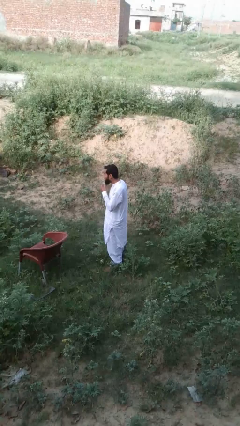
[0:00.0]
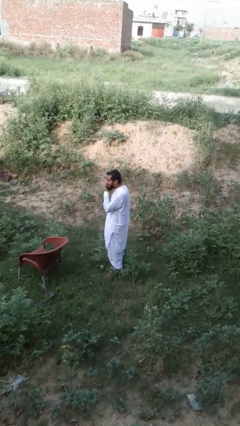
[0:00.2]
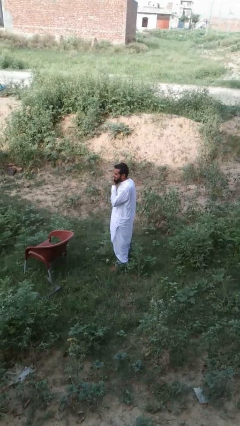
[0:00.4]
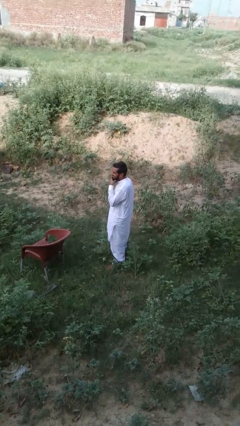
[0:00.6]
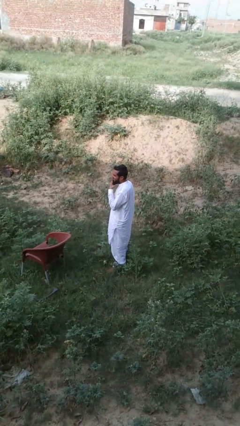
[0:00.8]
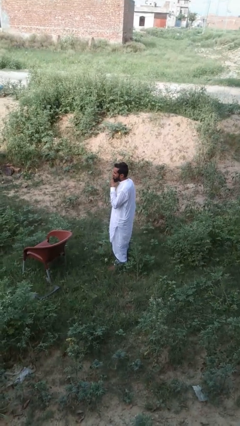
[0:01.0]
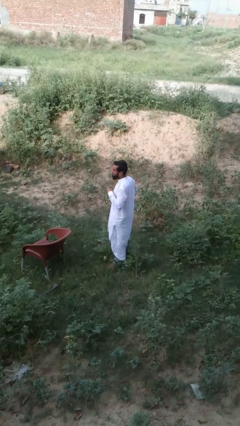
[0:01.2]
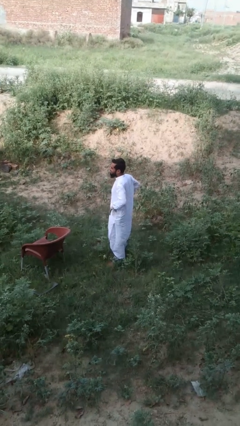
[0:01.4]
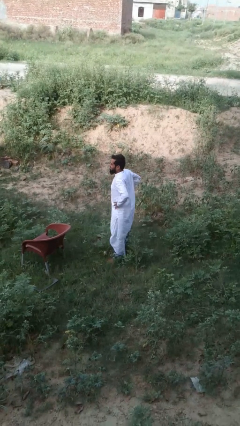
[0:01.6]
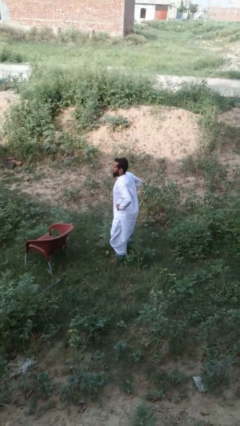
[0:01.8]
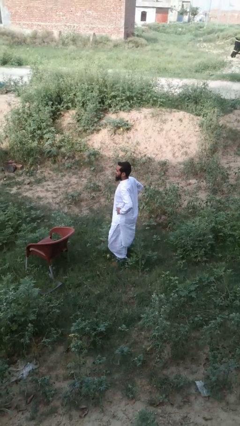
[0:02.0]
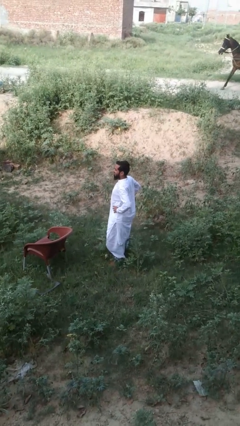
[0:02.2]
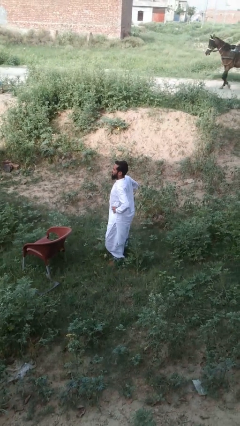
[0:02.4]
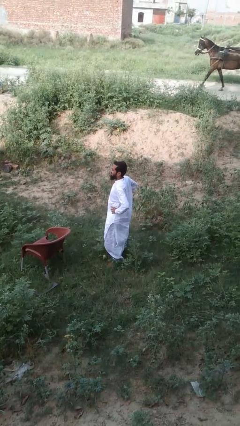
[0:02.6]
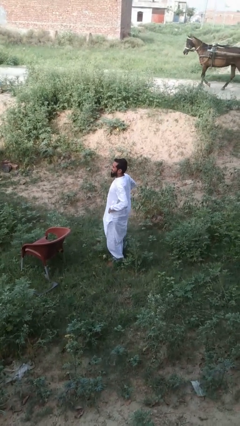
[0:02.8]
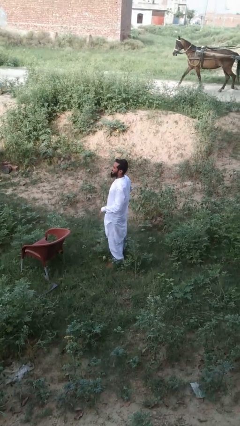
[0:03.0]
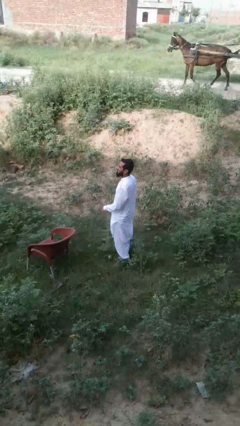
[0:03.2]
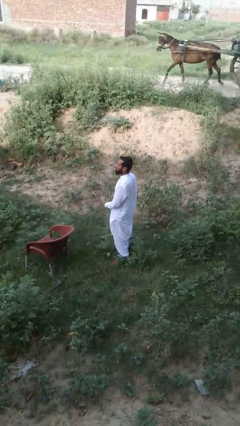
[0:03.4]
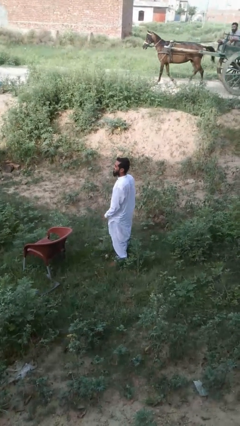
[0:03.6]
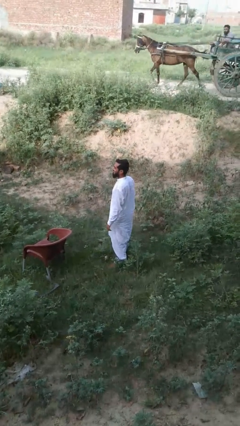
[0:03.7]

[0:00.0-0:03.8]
person wiggles hips

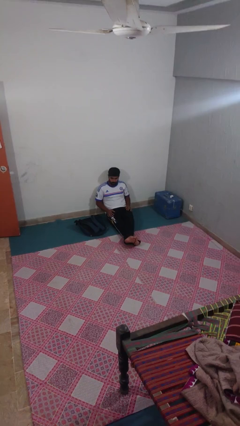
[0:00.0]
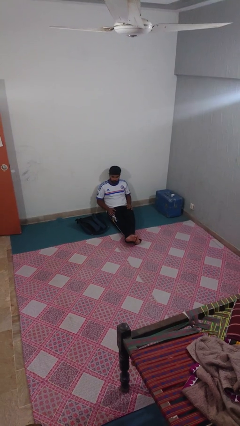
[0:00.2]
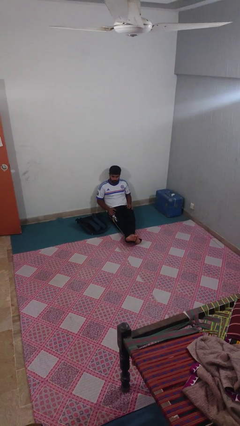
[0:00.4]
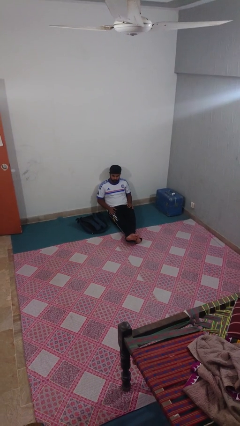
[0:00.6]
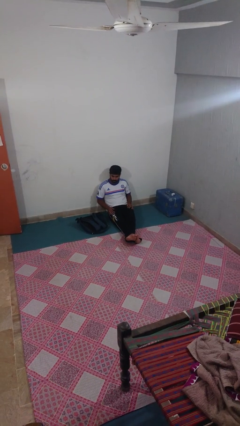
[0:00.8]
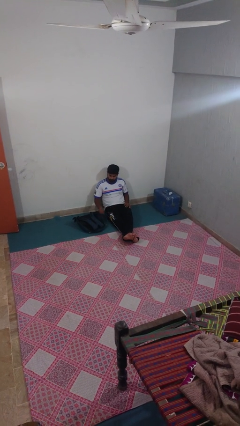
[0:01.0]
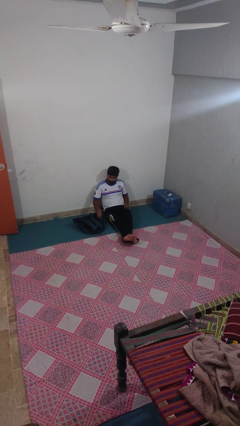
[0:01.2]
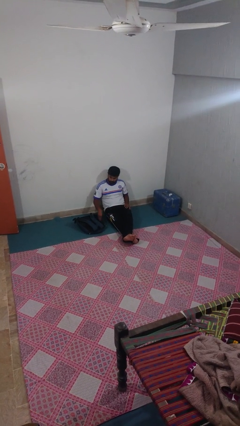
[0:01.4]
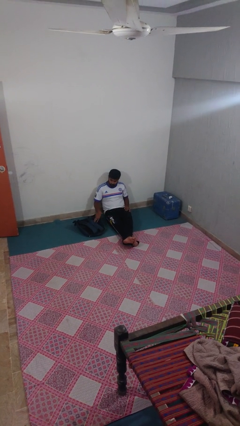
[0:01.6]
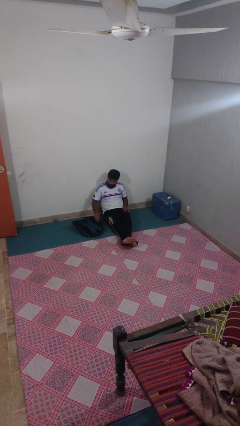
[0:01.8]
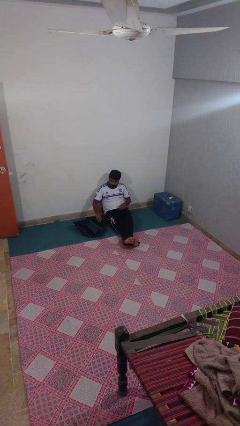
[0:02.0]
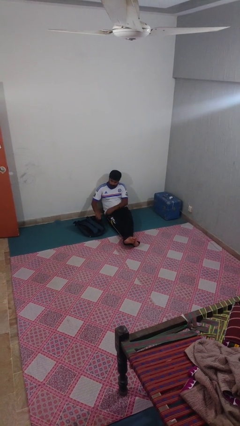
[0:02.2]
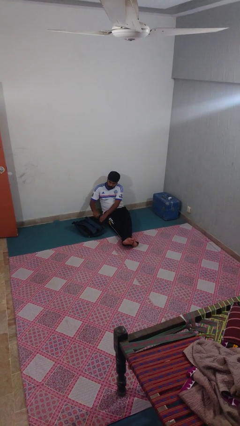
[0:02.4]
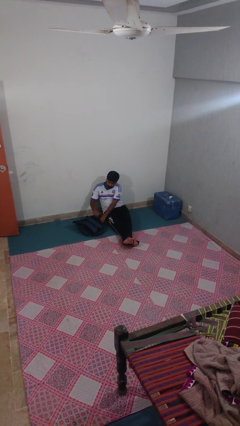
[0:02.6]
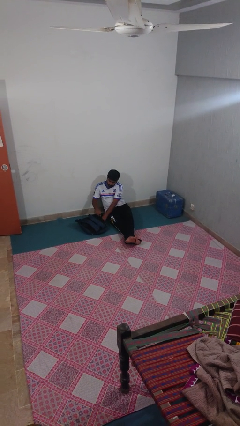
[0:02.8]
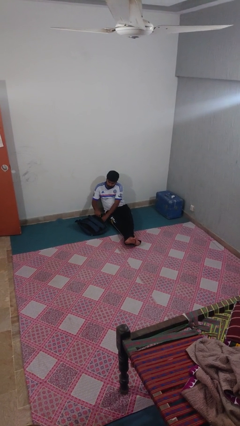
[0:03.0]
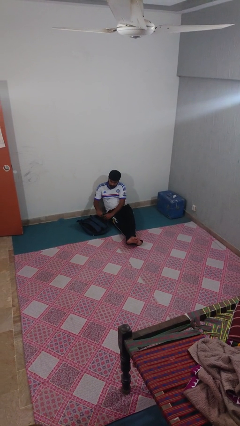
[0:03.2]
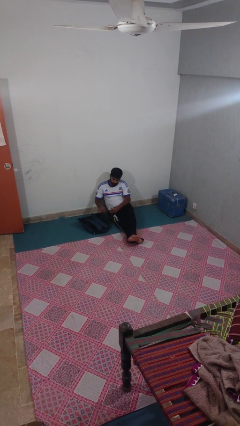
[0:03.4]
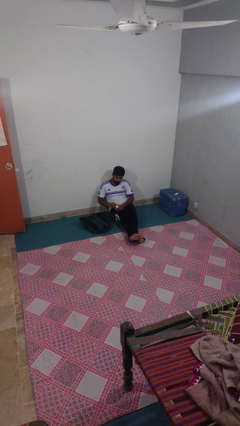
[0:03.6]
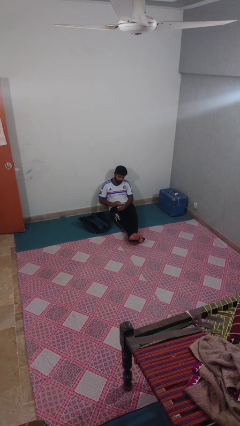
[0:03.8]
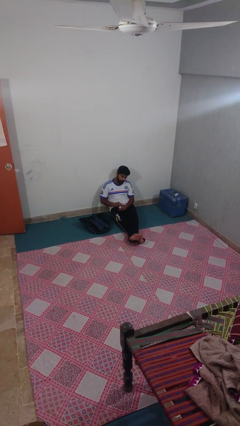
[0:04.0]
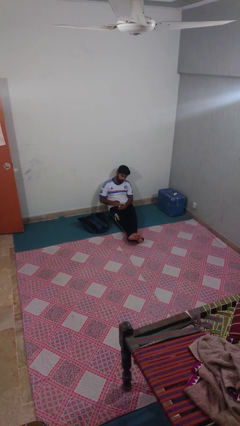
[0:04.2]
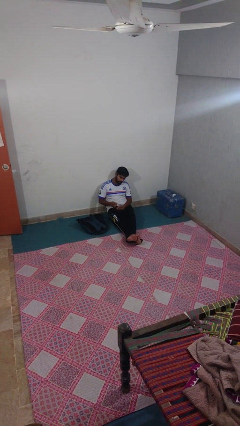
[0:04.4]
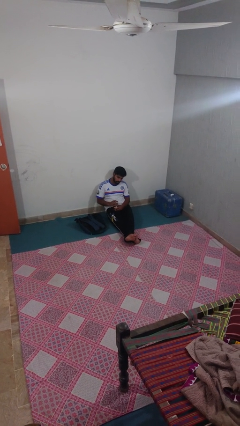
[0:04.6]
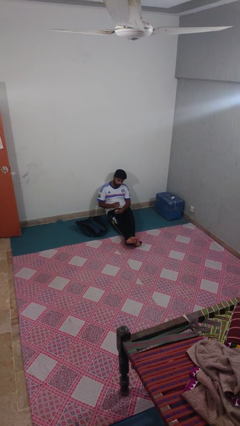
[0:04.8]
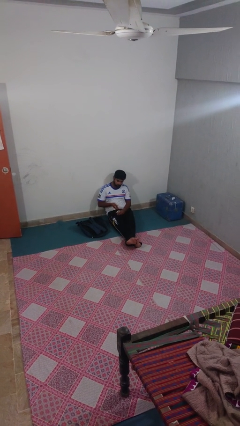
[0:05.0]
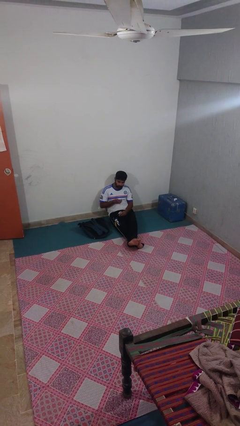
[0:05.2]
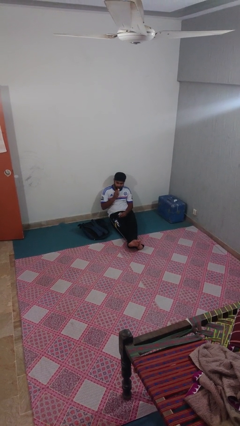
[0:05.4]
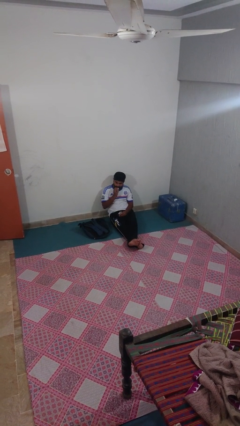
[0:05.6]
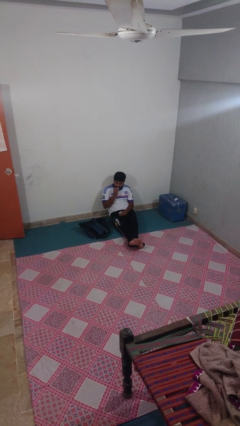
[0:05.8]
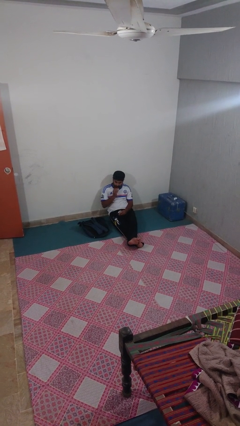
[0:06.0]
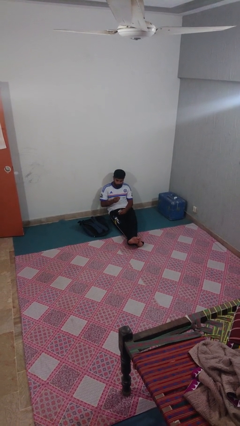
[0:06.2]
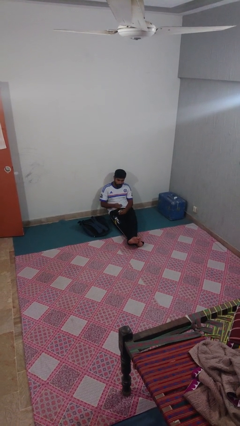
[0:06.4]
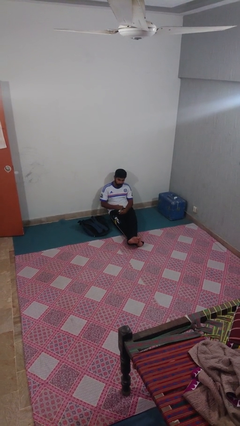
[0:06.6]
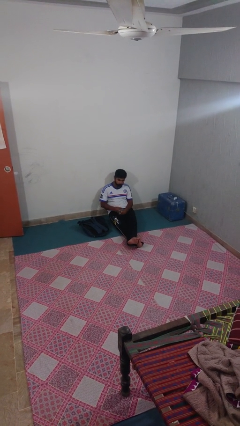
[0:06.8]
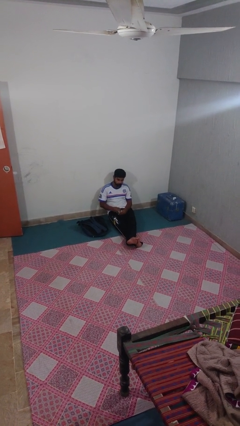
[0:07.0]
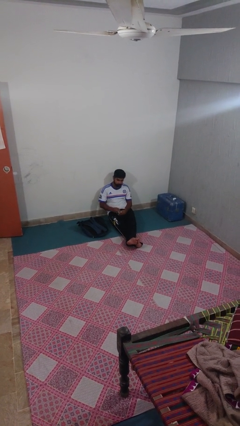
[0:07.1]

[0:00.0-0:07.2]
person eats snack from bag

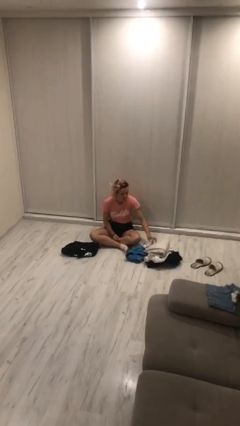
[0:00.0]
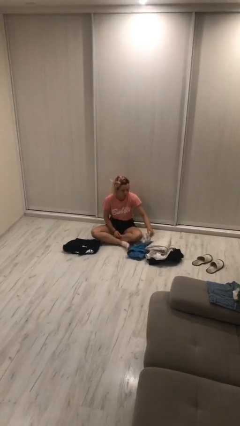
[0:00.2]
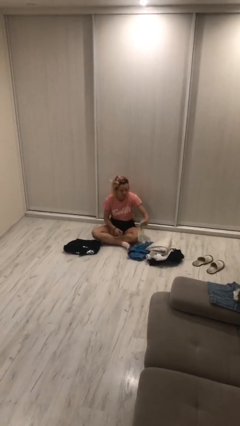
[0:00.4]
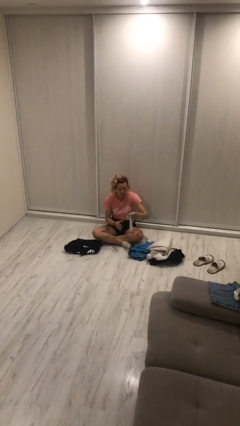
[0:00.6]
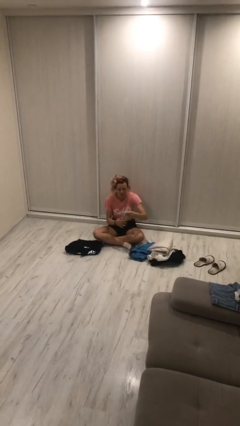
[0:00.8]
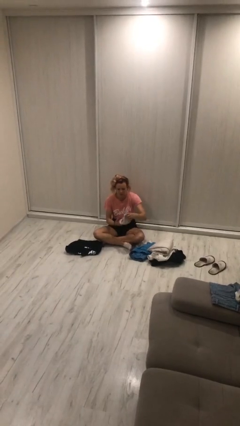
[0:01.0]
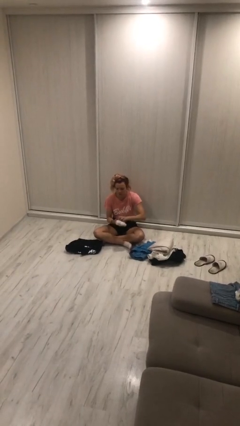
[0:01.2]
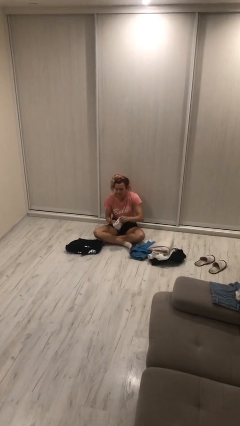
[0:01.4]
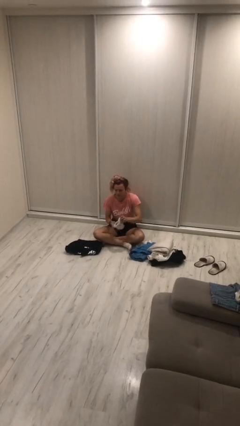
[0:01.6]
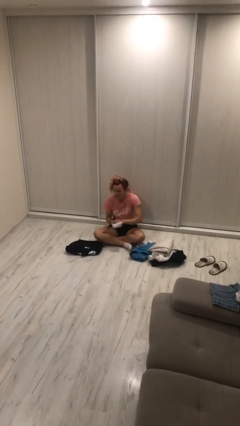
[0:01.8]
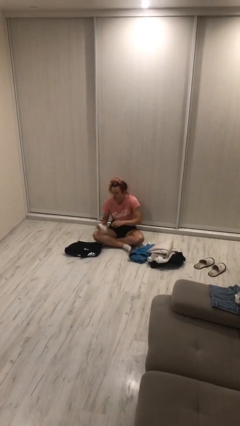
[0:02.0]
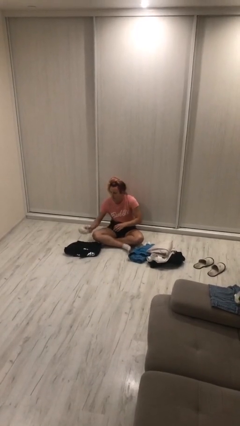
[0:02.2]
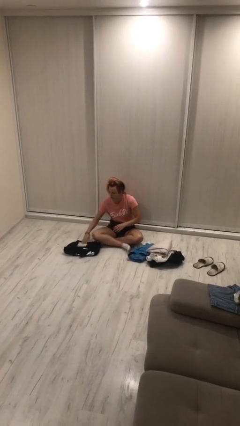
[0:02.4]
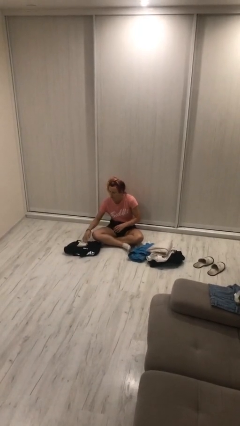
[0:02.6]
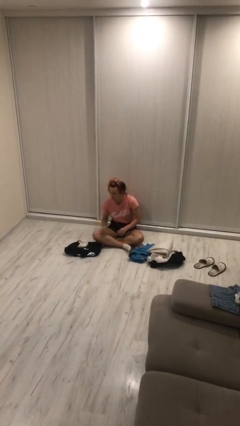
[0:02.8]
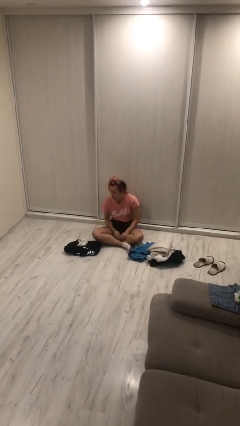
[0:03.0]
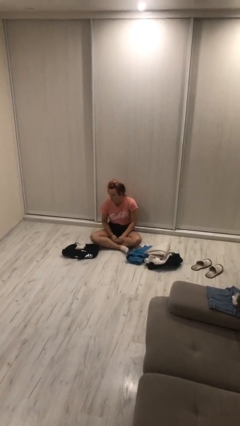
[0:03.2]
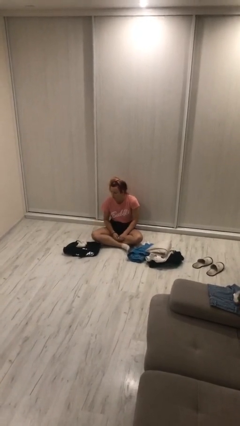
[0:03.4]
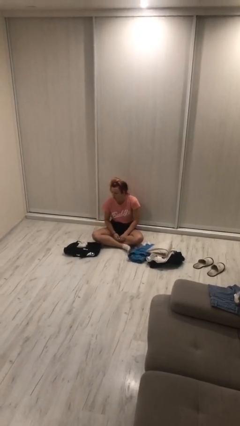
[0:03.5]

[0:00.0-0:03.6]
person folds socks

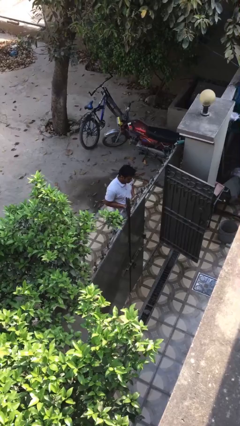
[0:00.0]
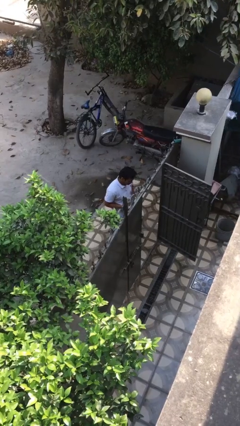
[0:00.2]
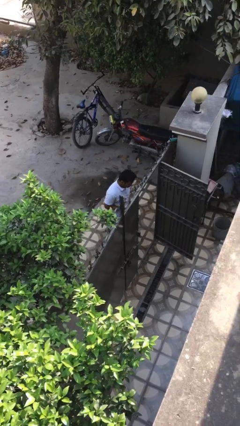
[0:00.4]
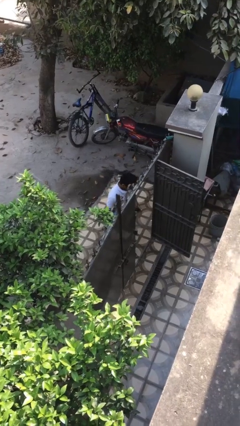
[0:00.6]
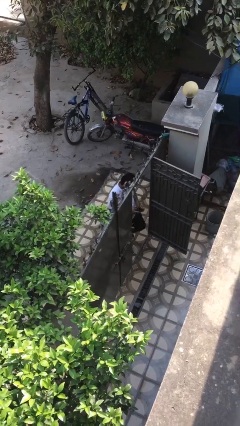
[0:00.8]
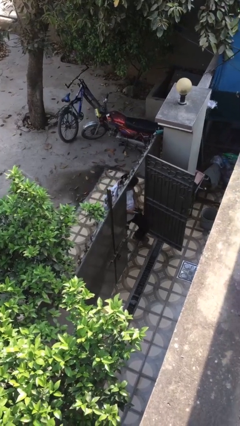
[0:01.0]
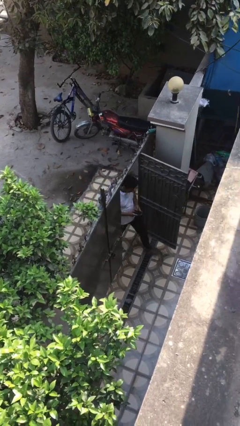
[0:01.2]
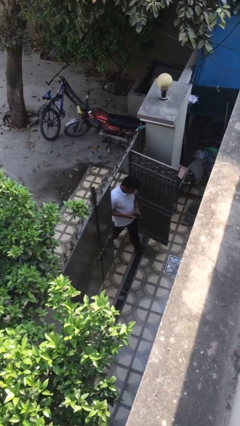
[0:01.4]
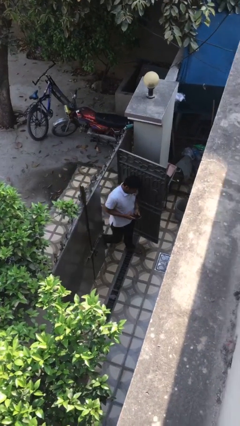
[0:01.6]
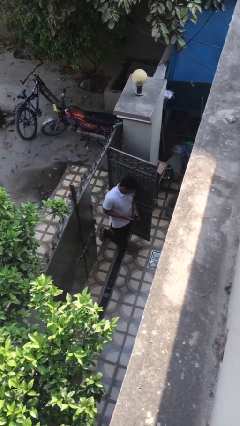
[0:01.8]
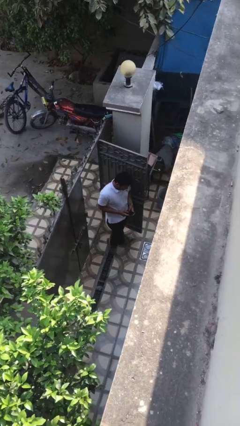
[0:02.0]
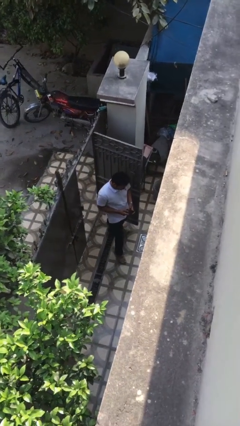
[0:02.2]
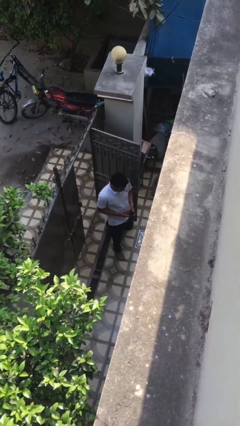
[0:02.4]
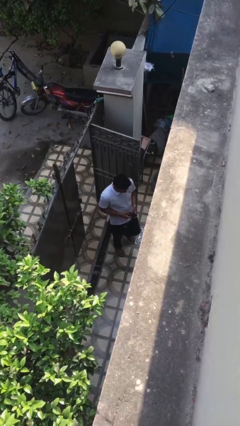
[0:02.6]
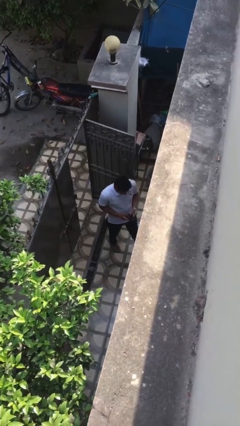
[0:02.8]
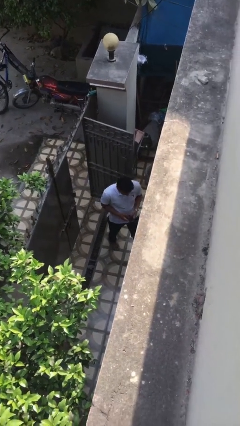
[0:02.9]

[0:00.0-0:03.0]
person enters scene through structure
